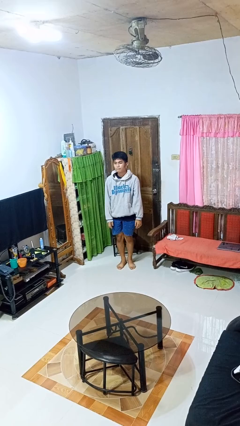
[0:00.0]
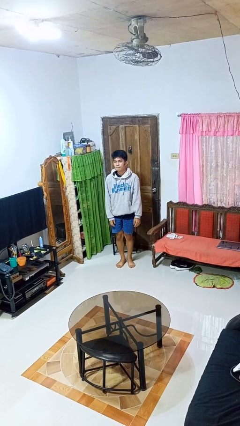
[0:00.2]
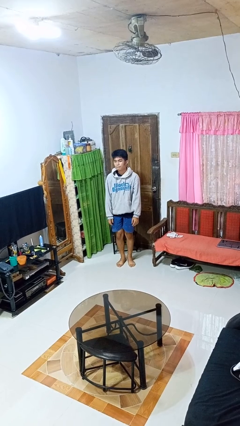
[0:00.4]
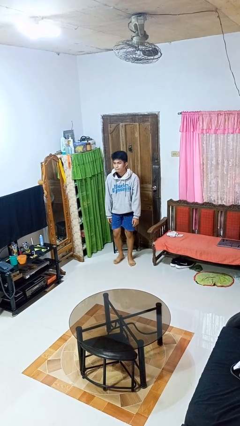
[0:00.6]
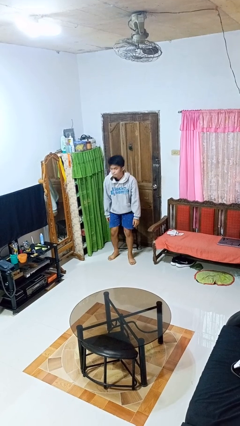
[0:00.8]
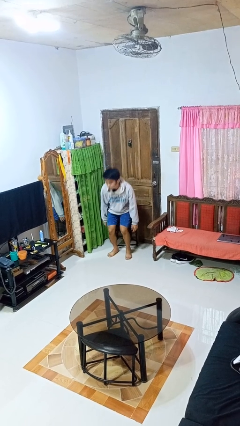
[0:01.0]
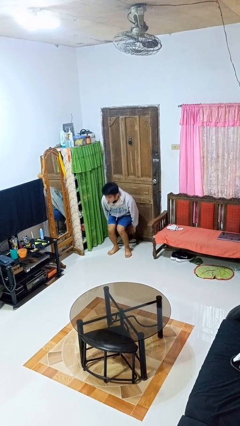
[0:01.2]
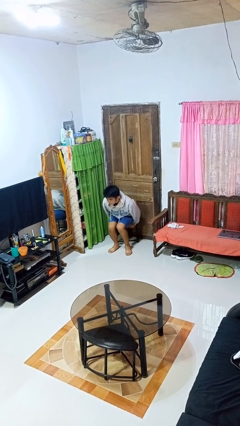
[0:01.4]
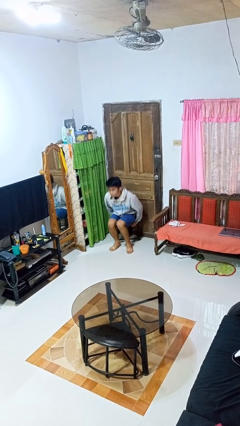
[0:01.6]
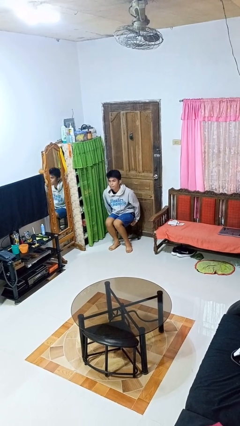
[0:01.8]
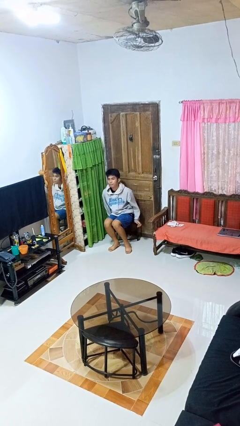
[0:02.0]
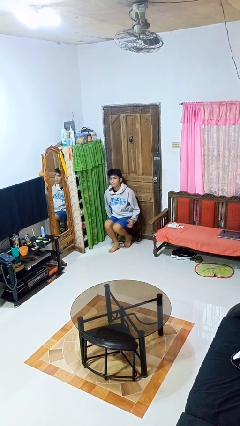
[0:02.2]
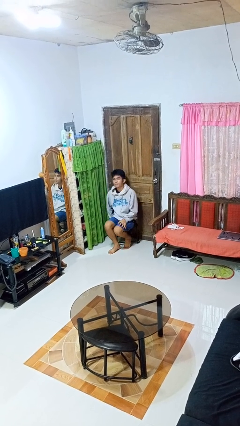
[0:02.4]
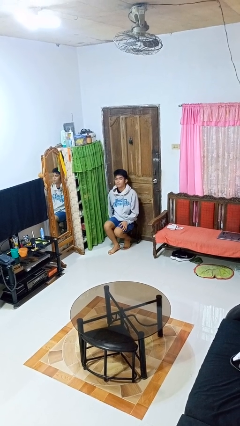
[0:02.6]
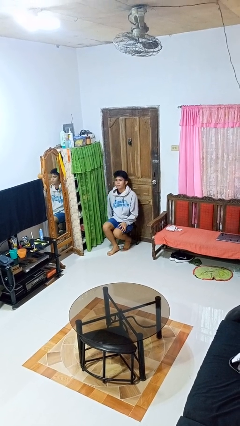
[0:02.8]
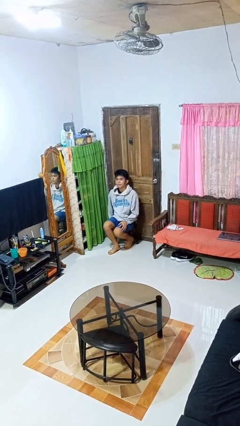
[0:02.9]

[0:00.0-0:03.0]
person sits down

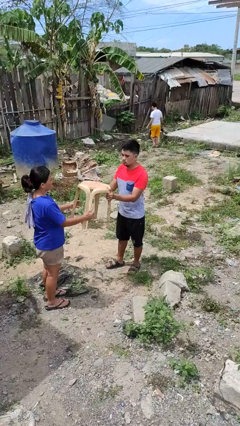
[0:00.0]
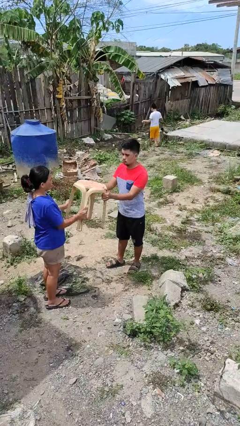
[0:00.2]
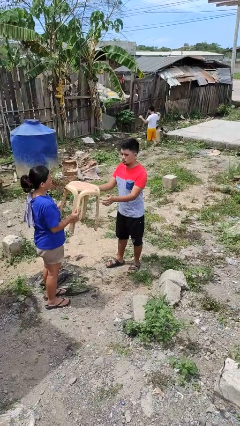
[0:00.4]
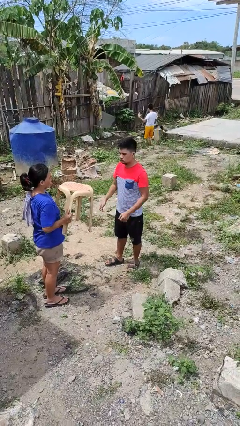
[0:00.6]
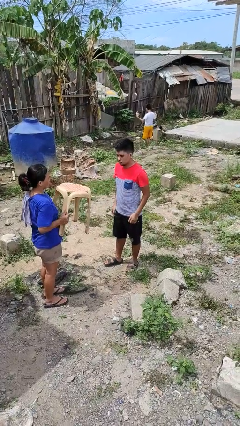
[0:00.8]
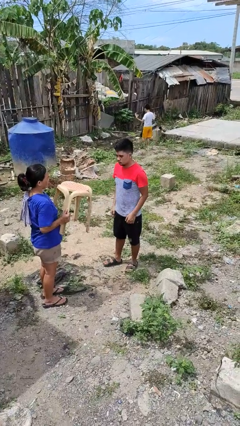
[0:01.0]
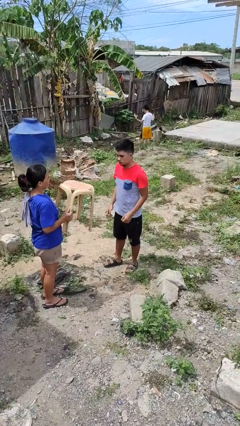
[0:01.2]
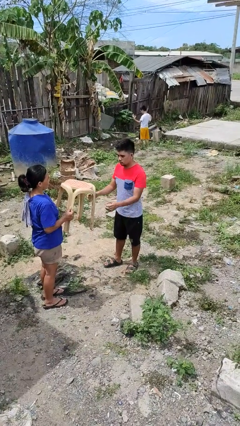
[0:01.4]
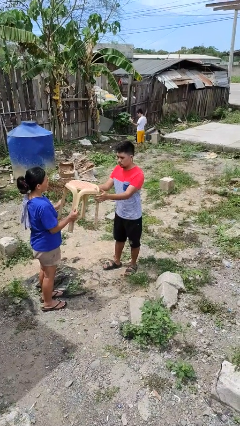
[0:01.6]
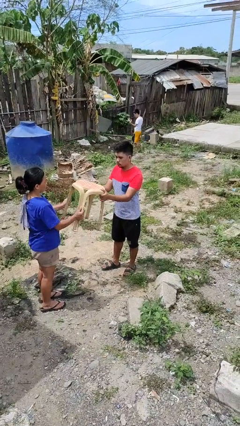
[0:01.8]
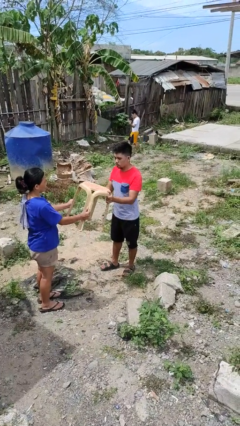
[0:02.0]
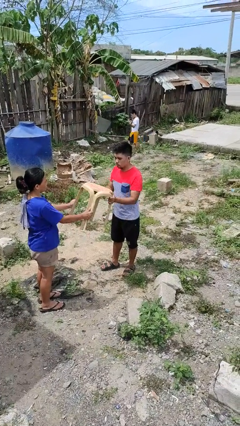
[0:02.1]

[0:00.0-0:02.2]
person transfers object to person

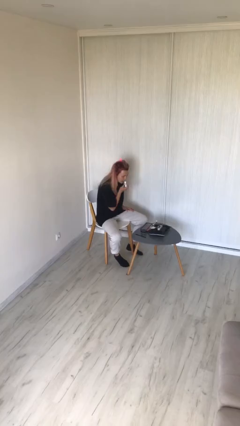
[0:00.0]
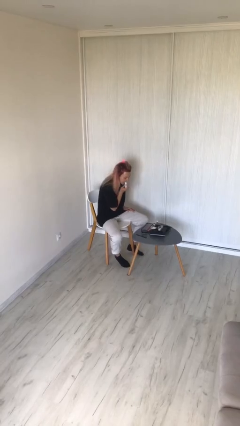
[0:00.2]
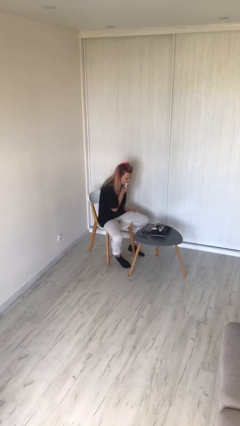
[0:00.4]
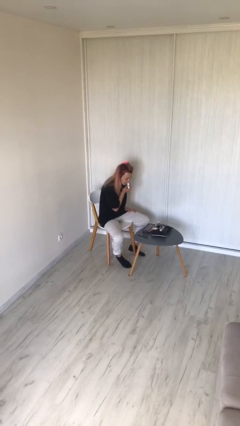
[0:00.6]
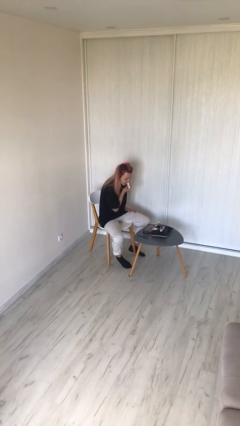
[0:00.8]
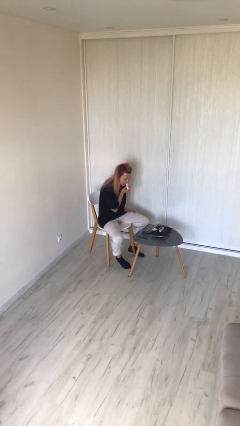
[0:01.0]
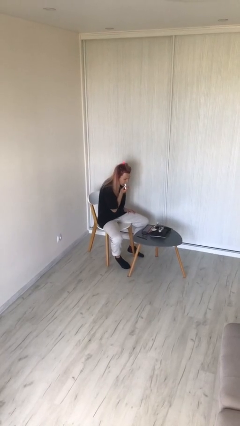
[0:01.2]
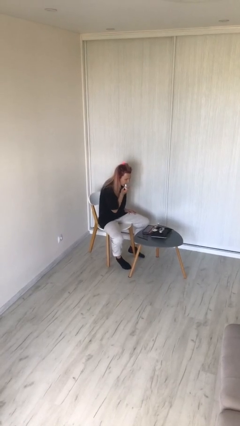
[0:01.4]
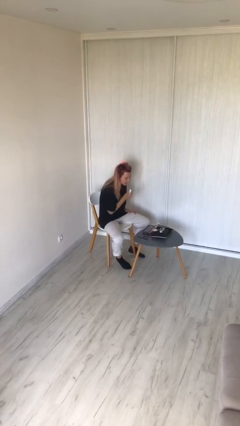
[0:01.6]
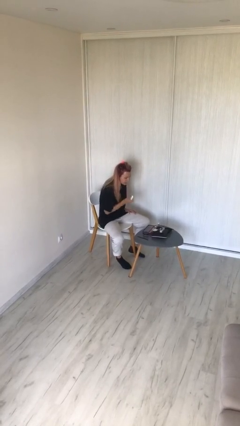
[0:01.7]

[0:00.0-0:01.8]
person applies lip makeup

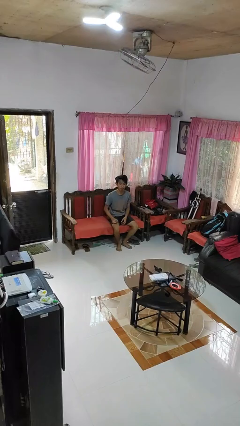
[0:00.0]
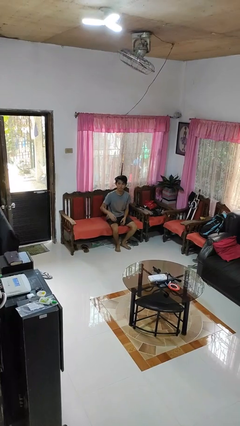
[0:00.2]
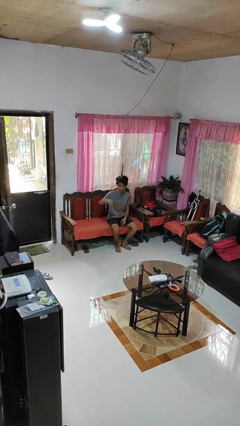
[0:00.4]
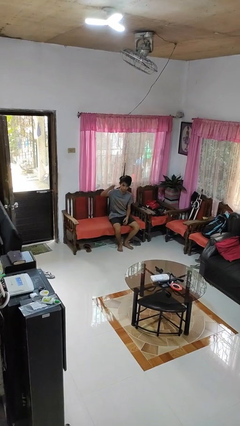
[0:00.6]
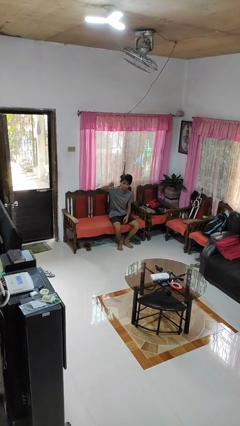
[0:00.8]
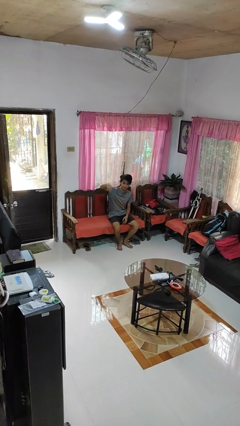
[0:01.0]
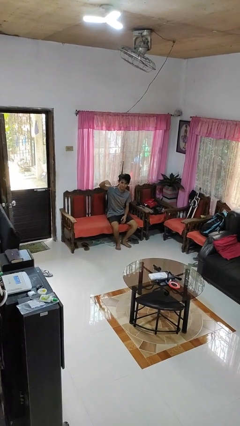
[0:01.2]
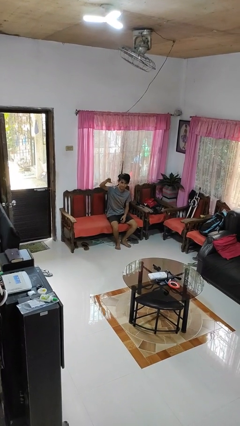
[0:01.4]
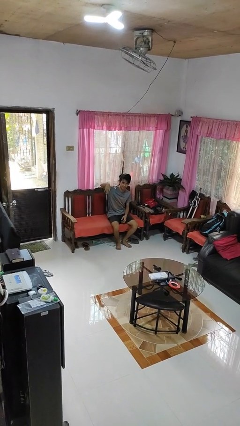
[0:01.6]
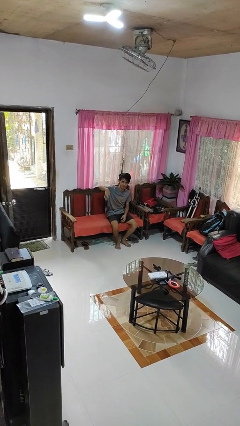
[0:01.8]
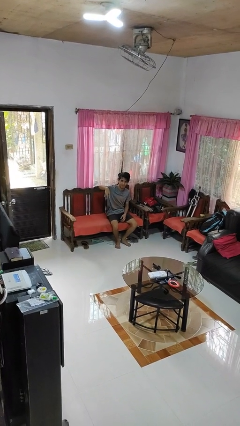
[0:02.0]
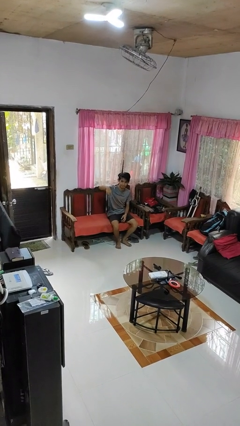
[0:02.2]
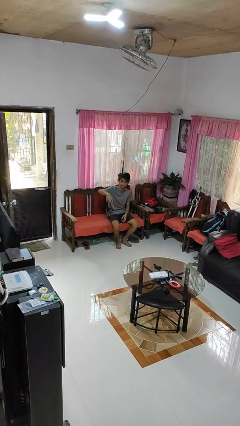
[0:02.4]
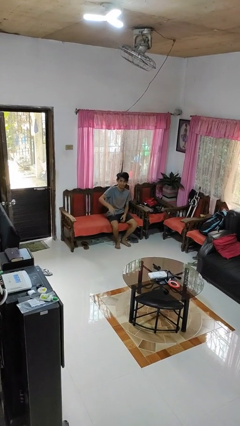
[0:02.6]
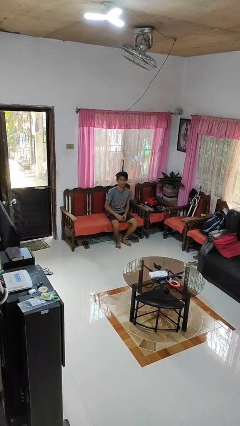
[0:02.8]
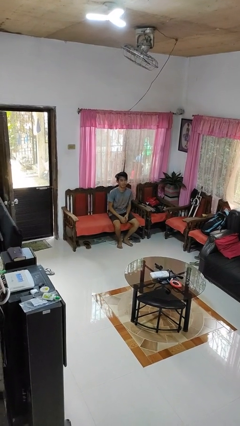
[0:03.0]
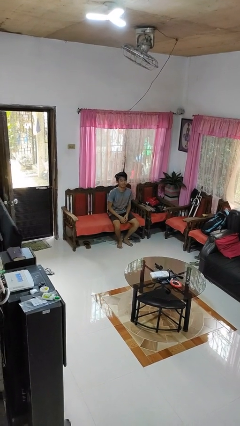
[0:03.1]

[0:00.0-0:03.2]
person gestures come here

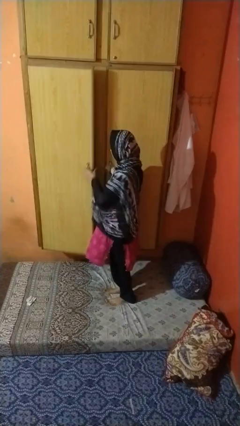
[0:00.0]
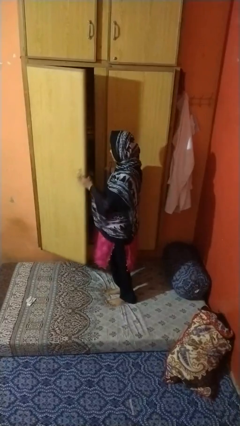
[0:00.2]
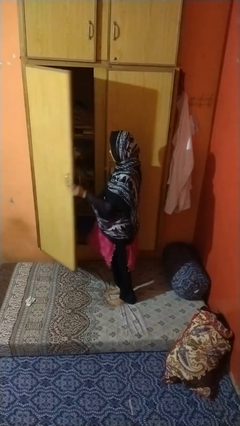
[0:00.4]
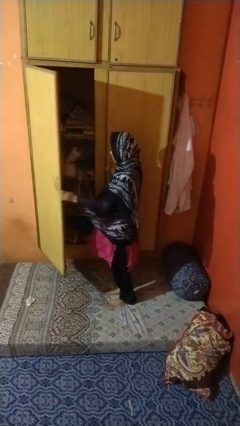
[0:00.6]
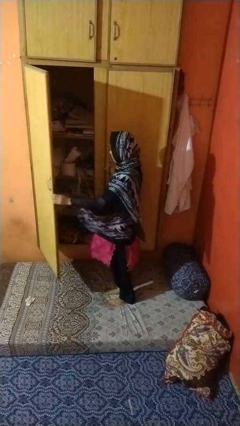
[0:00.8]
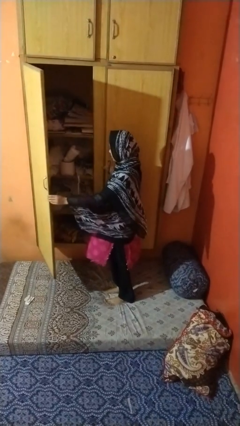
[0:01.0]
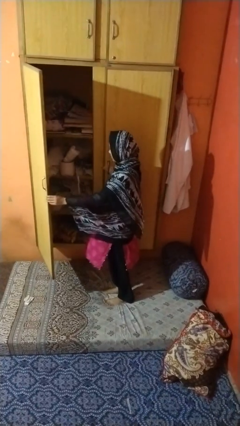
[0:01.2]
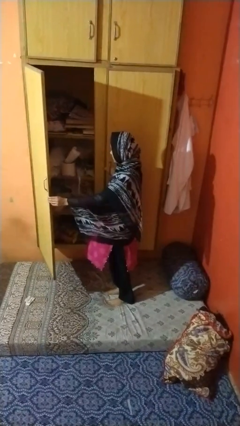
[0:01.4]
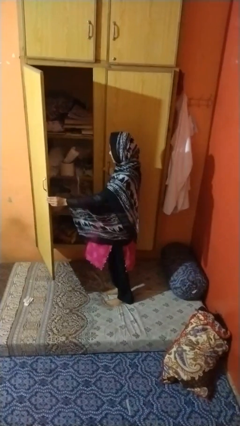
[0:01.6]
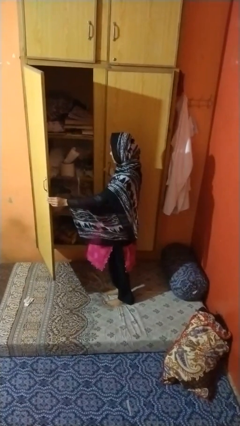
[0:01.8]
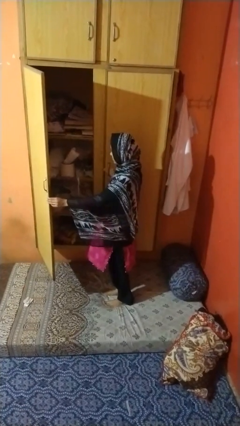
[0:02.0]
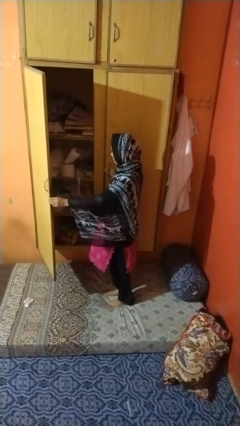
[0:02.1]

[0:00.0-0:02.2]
person opens closet door

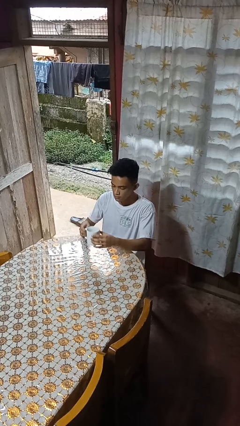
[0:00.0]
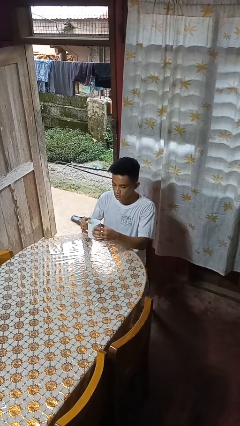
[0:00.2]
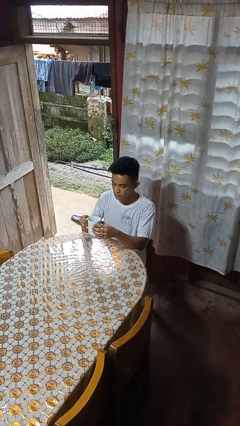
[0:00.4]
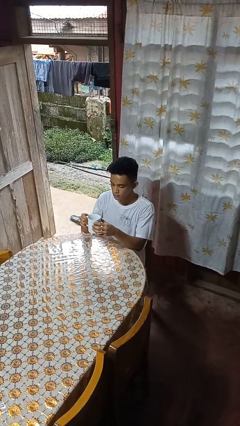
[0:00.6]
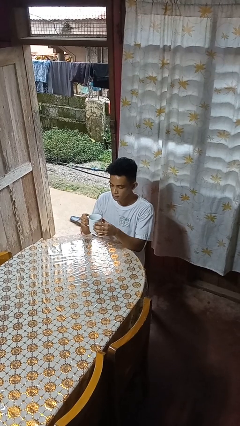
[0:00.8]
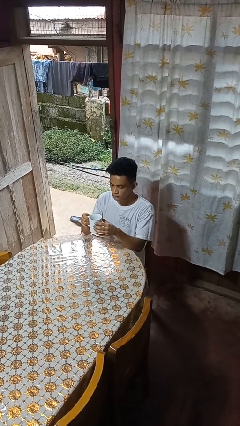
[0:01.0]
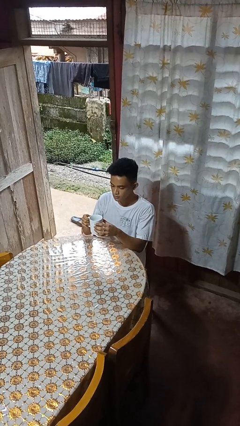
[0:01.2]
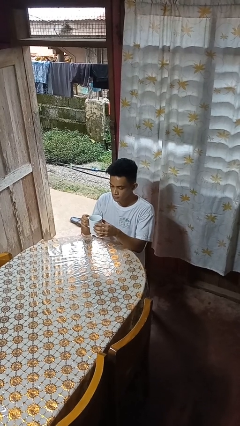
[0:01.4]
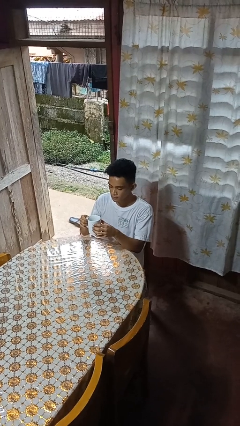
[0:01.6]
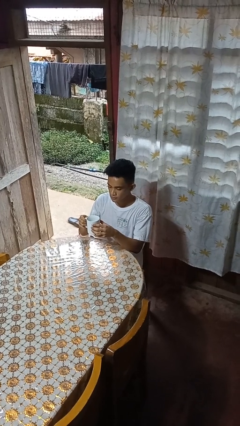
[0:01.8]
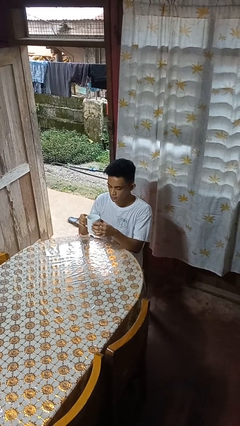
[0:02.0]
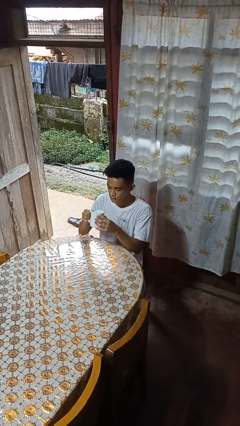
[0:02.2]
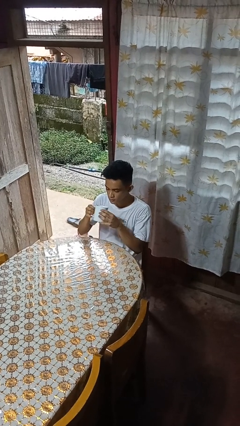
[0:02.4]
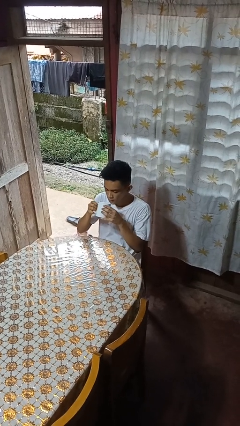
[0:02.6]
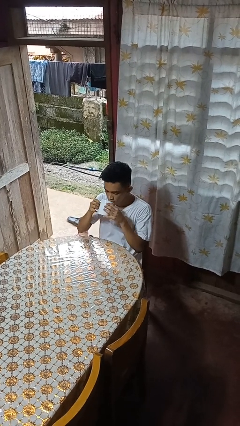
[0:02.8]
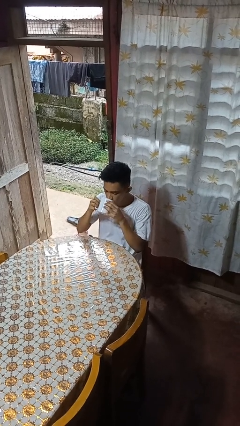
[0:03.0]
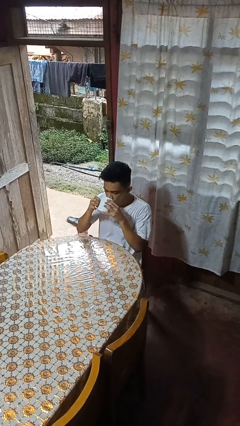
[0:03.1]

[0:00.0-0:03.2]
person picks up object from table

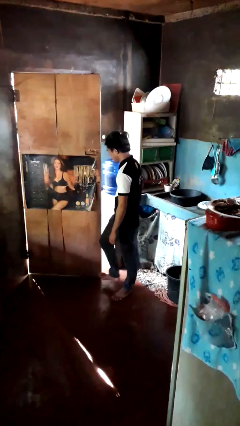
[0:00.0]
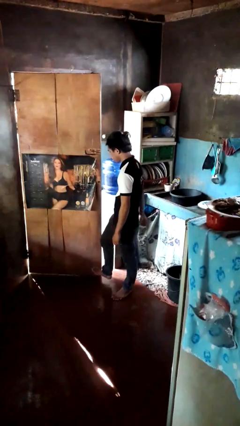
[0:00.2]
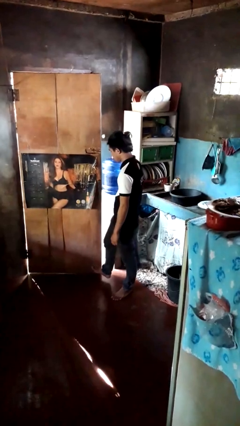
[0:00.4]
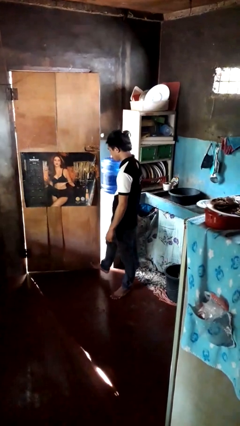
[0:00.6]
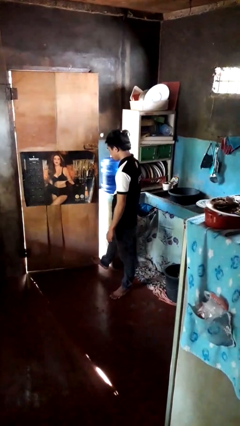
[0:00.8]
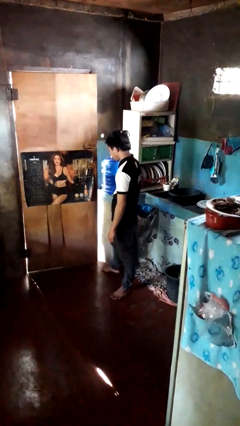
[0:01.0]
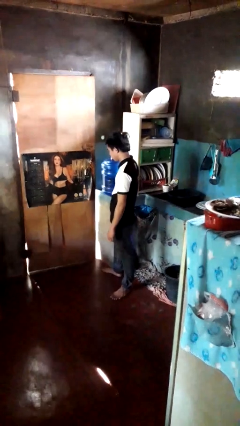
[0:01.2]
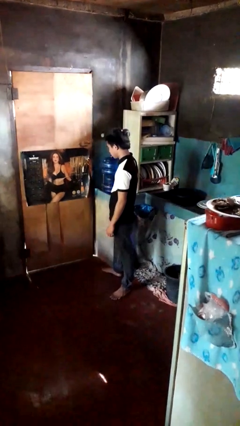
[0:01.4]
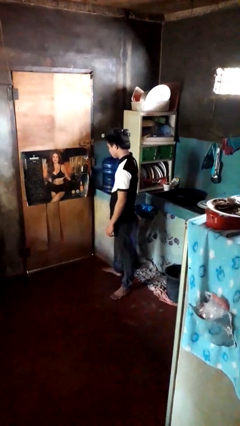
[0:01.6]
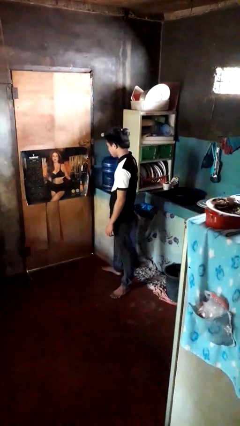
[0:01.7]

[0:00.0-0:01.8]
person closes door with foot
